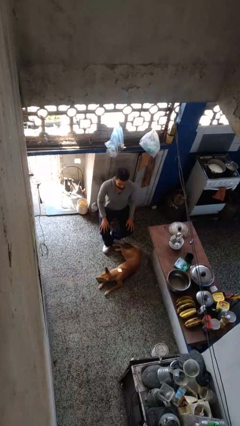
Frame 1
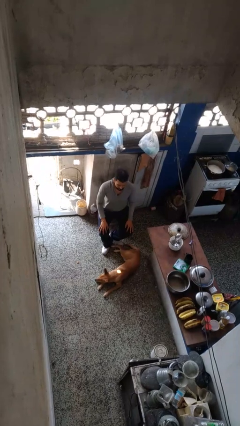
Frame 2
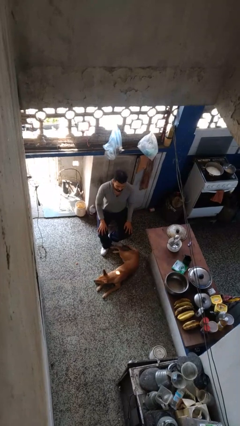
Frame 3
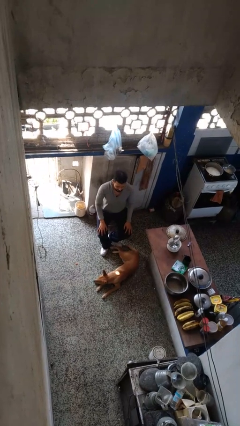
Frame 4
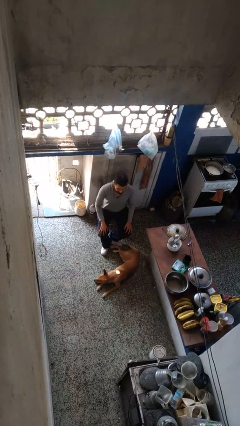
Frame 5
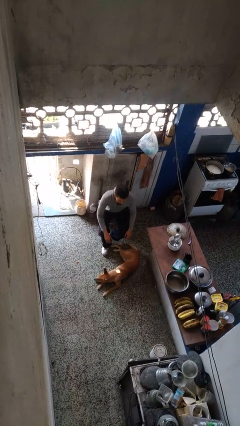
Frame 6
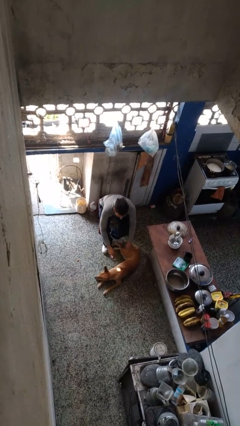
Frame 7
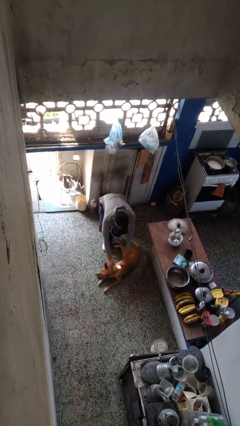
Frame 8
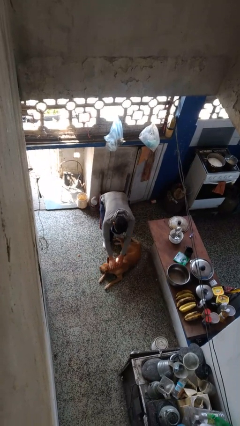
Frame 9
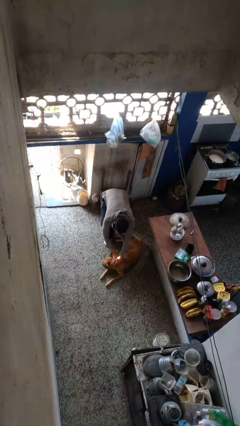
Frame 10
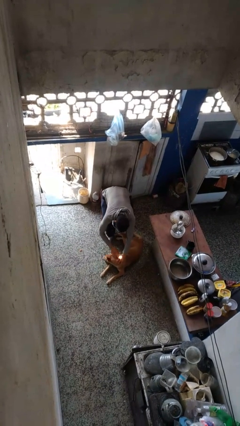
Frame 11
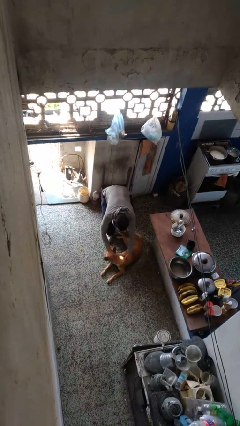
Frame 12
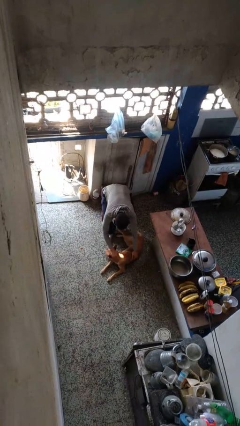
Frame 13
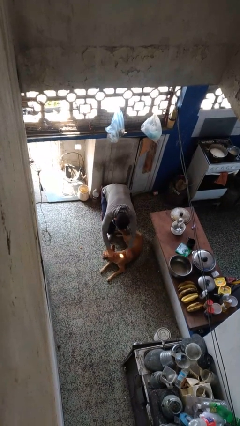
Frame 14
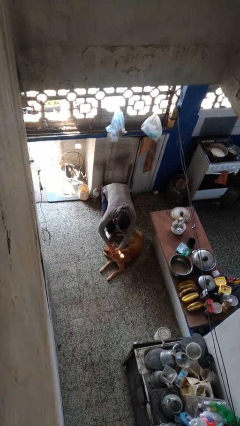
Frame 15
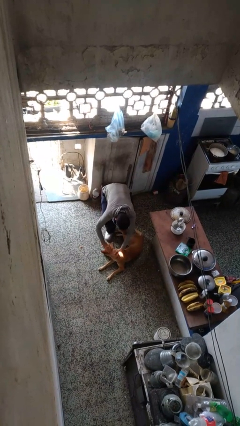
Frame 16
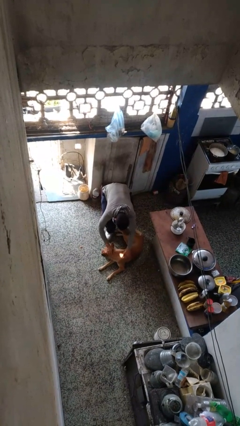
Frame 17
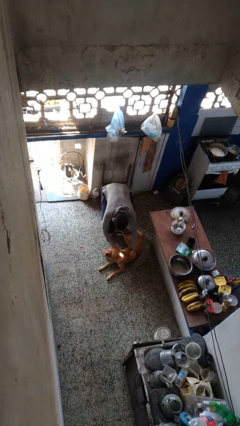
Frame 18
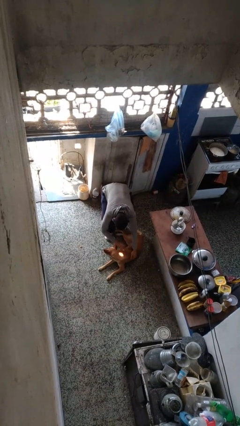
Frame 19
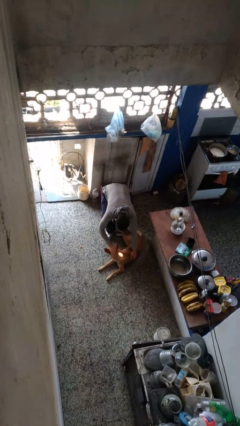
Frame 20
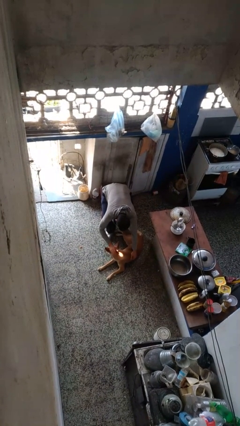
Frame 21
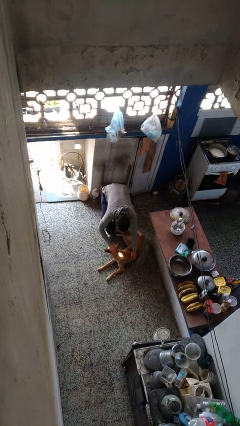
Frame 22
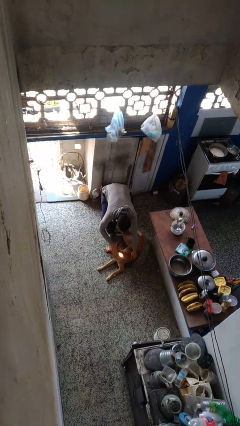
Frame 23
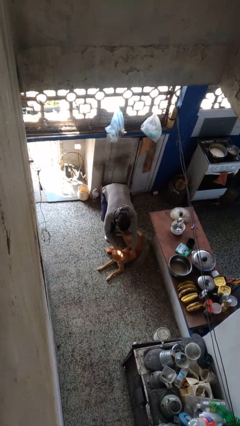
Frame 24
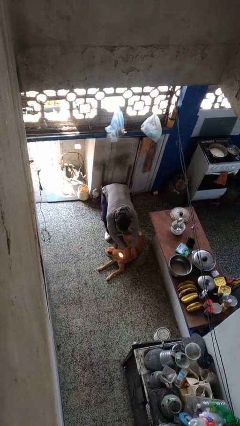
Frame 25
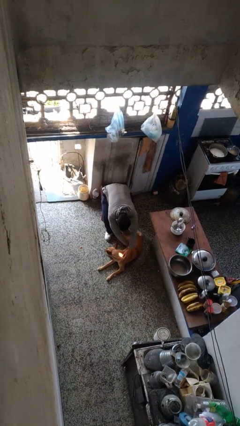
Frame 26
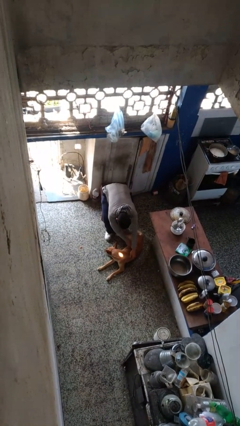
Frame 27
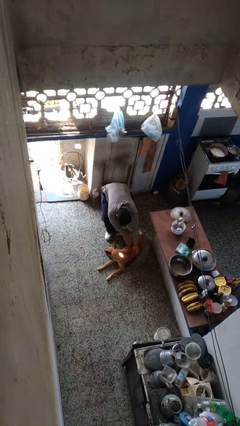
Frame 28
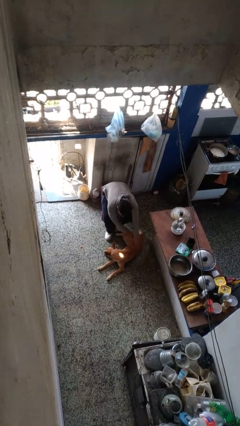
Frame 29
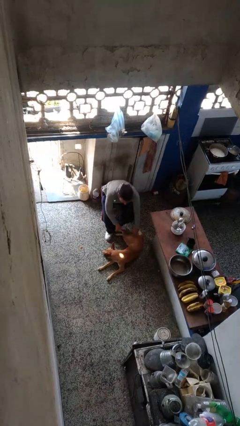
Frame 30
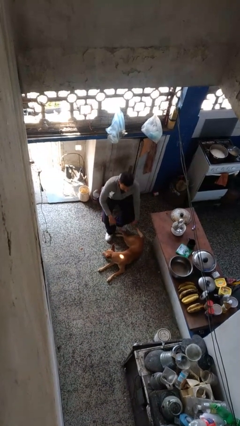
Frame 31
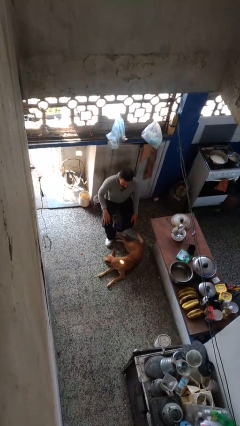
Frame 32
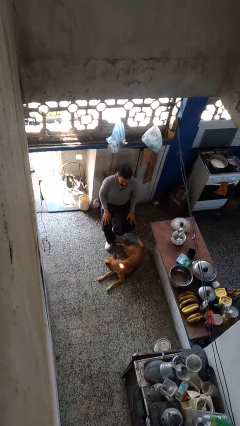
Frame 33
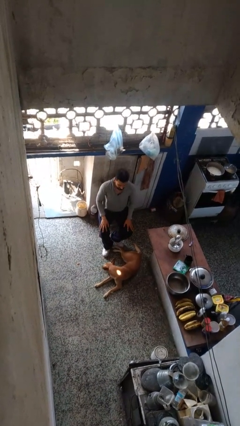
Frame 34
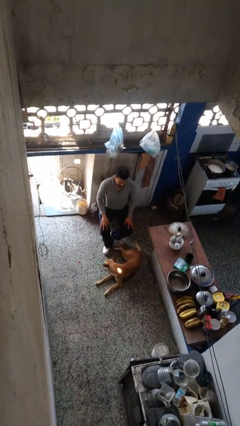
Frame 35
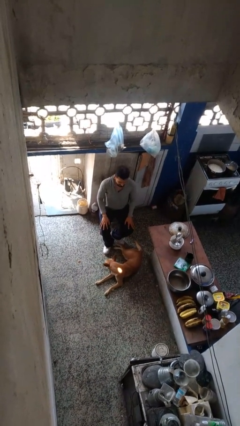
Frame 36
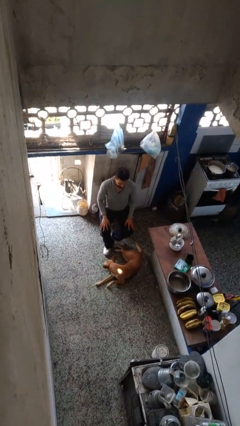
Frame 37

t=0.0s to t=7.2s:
person pets dog

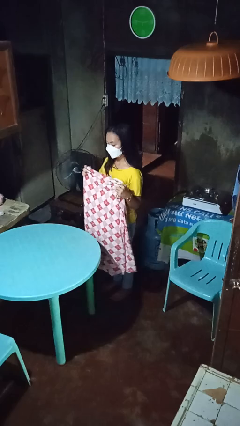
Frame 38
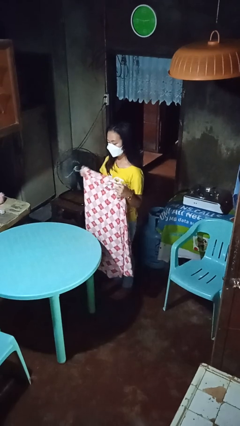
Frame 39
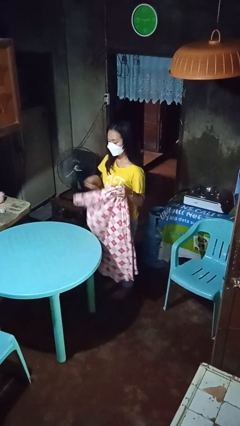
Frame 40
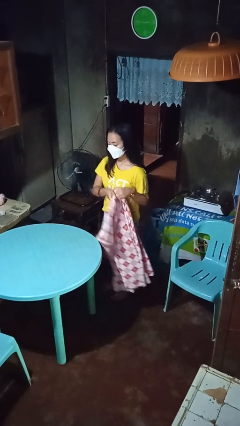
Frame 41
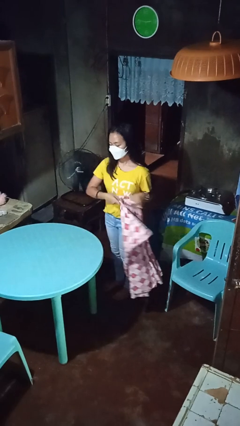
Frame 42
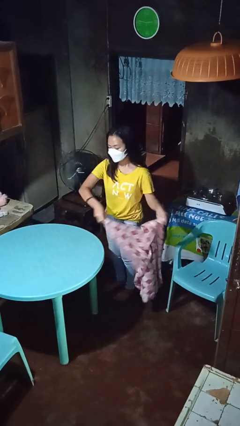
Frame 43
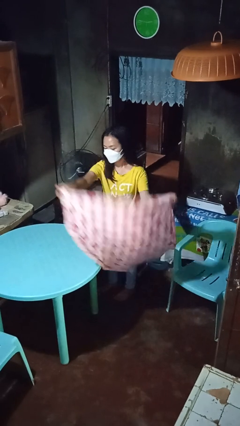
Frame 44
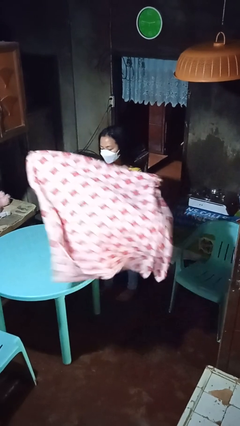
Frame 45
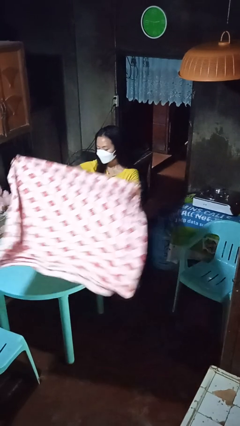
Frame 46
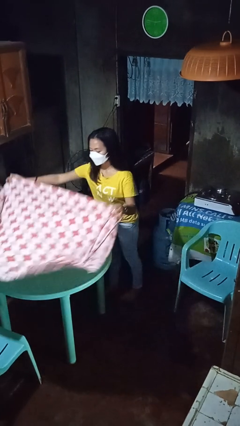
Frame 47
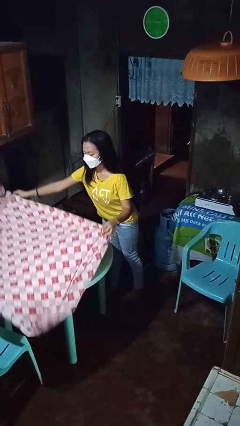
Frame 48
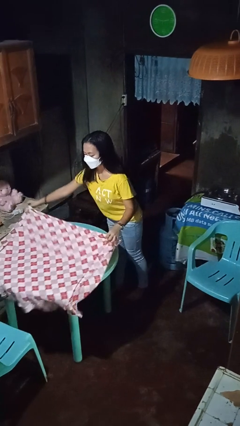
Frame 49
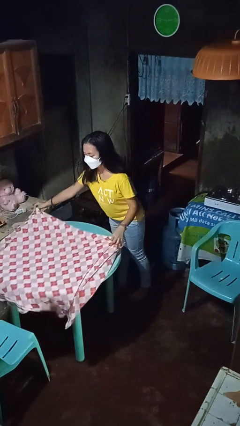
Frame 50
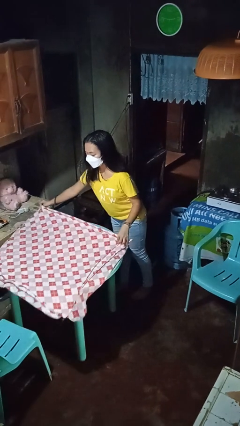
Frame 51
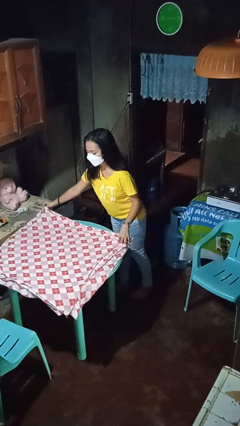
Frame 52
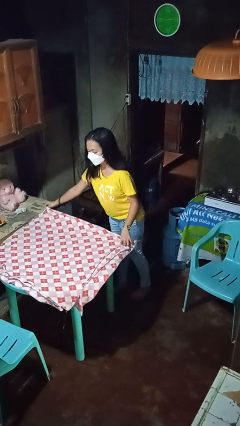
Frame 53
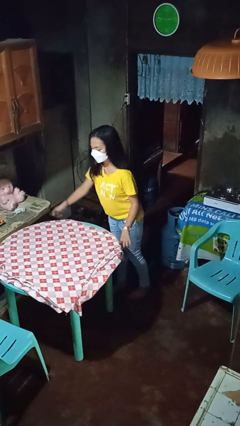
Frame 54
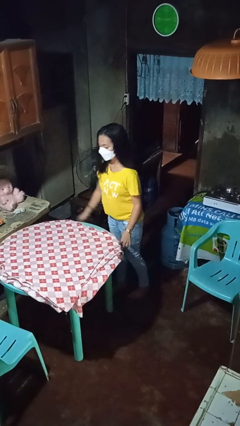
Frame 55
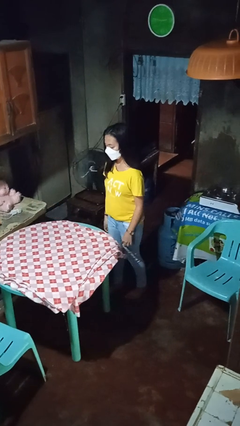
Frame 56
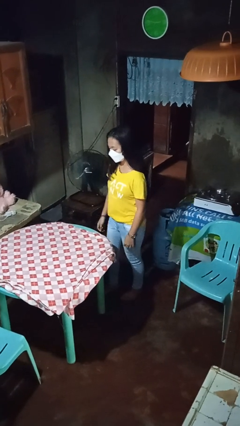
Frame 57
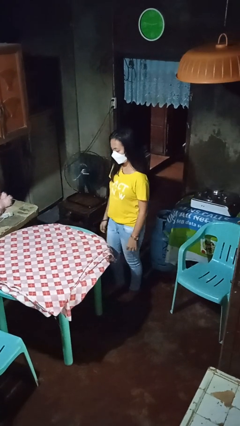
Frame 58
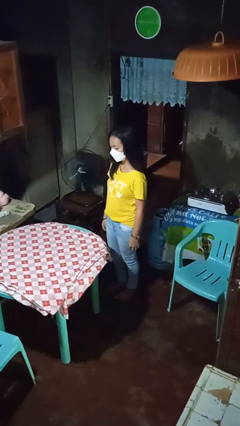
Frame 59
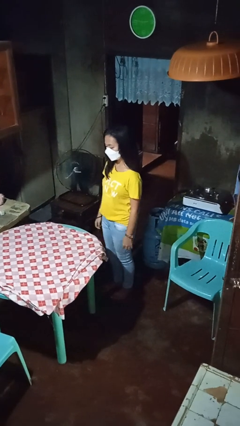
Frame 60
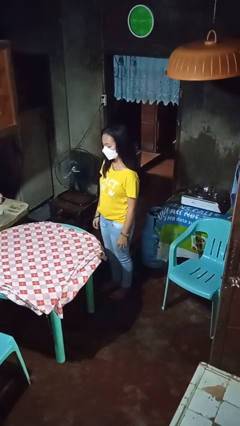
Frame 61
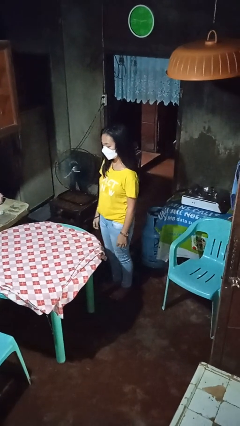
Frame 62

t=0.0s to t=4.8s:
person spreads tablecloth

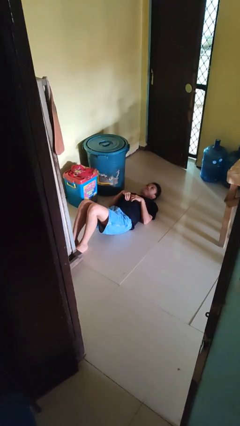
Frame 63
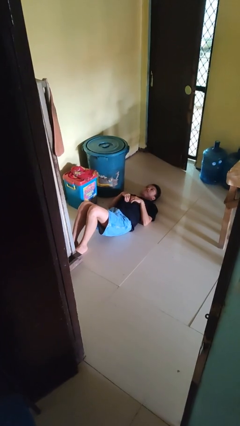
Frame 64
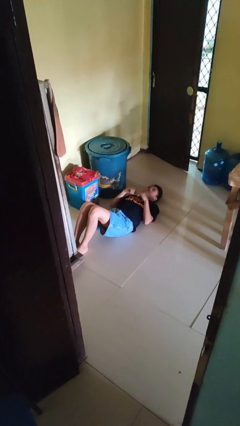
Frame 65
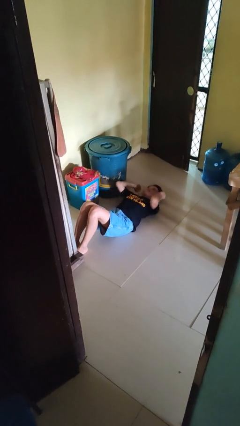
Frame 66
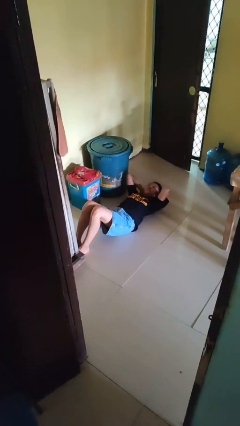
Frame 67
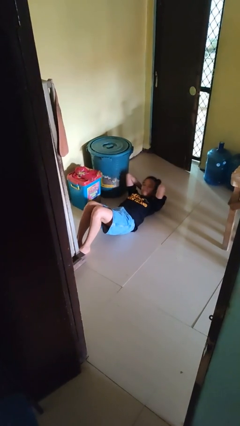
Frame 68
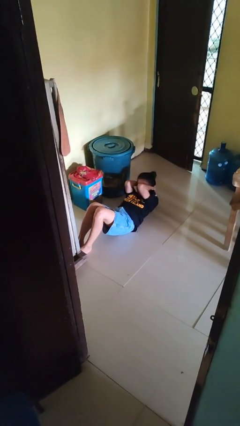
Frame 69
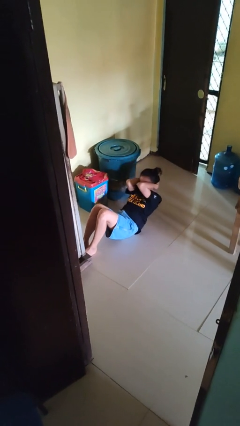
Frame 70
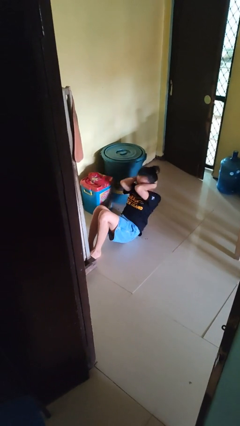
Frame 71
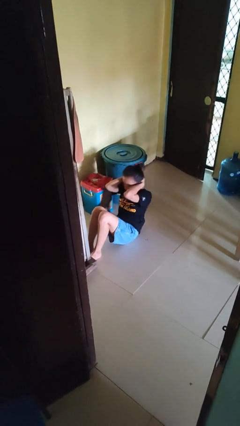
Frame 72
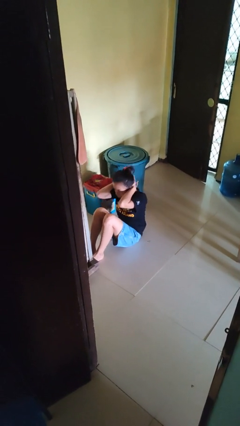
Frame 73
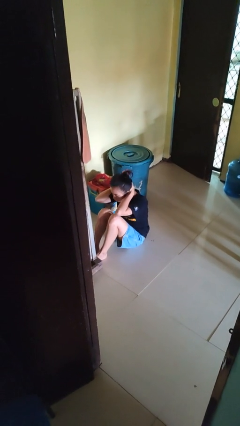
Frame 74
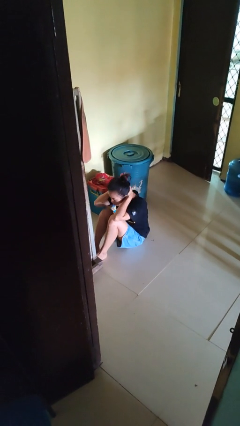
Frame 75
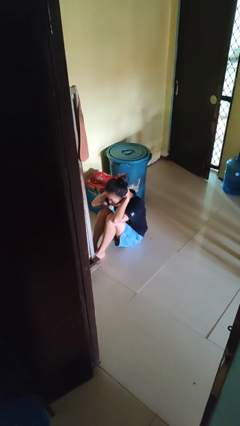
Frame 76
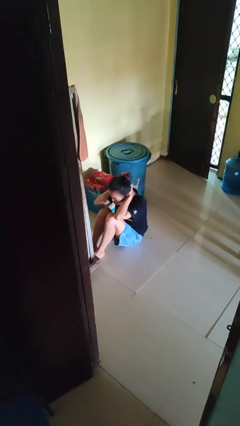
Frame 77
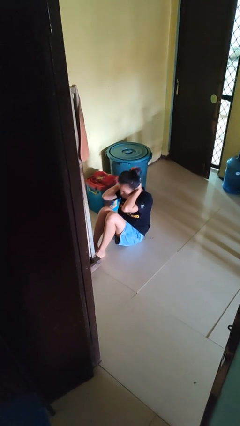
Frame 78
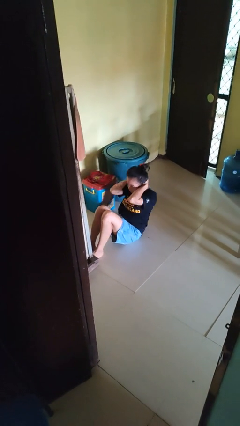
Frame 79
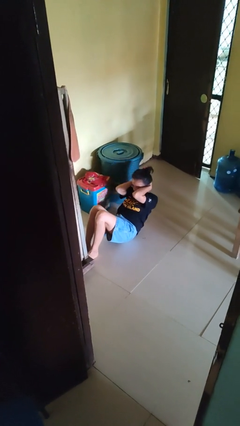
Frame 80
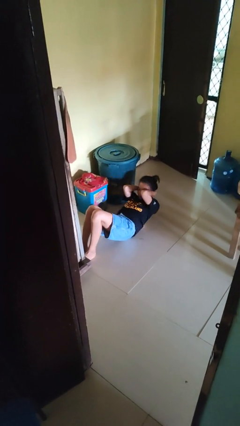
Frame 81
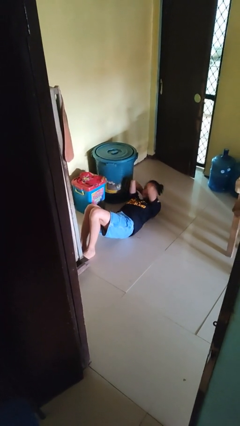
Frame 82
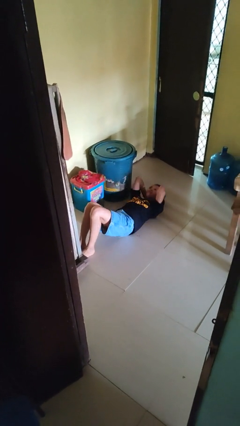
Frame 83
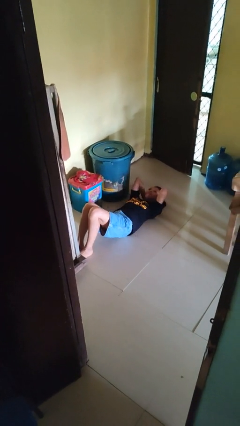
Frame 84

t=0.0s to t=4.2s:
person exercises with situp

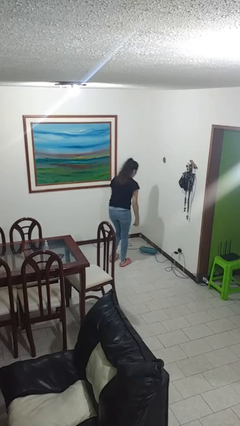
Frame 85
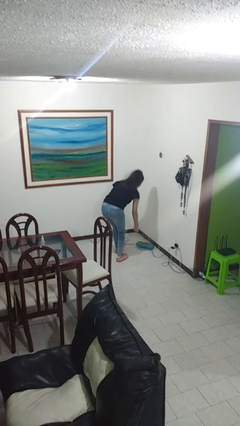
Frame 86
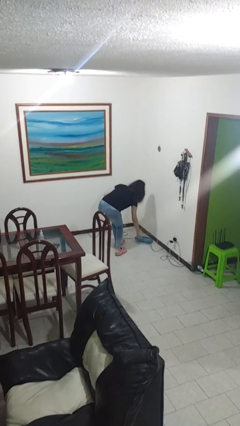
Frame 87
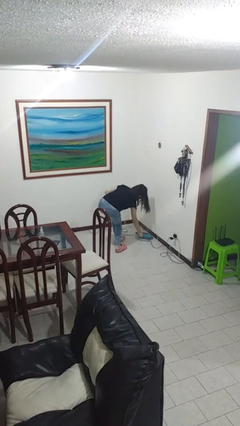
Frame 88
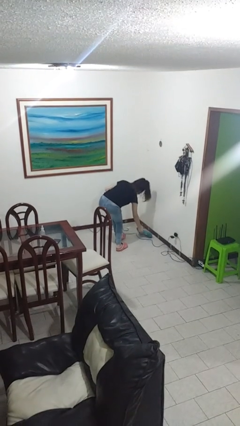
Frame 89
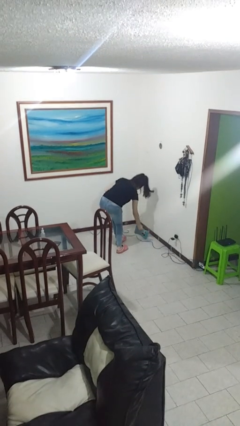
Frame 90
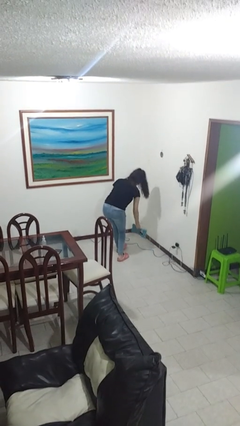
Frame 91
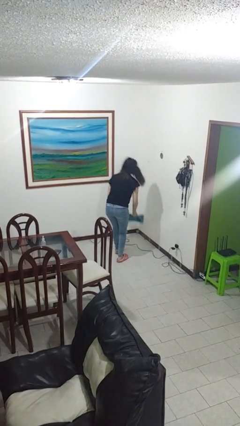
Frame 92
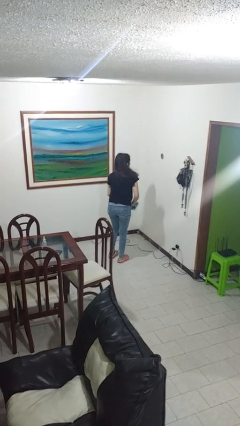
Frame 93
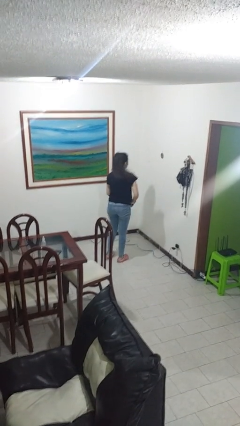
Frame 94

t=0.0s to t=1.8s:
person picks up object from floor
